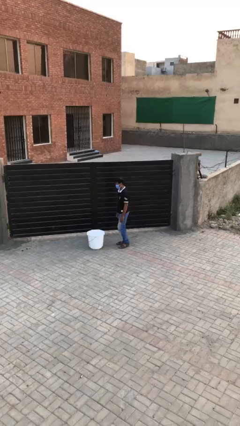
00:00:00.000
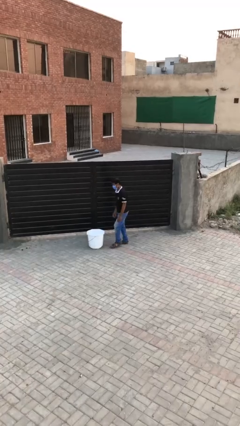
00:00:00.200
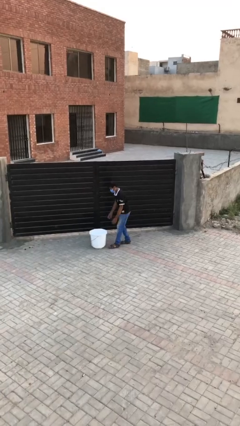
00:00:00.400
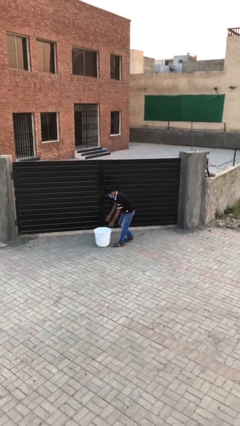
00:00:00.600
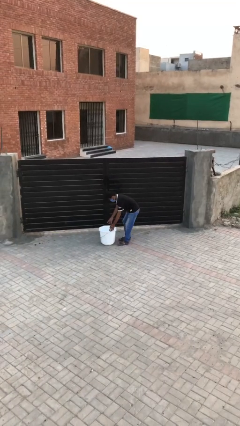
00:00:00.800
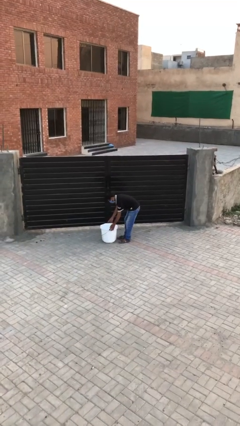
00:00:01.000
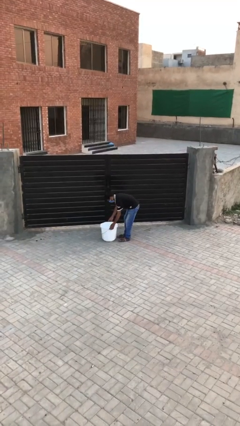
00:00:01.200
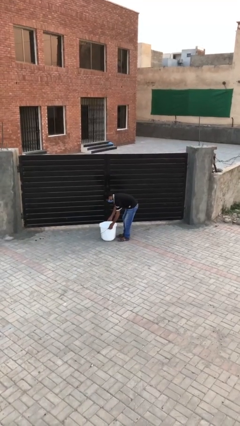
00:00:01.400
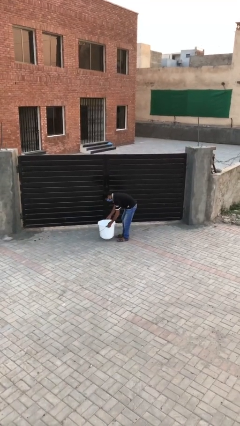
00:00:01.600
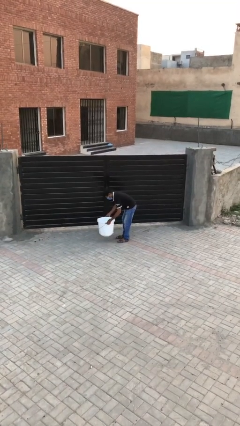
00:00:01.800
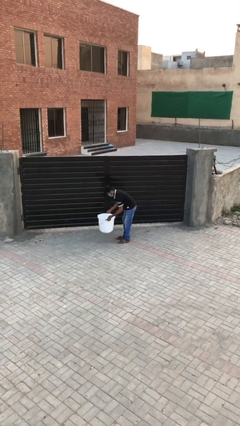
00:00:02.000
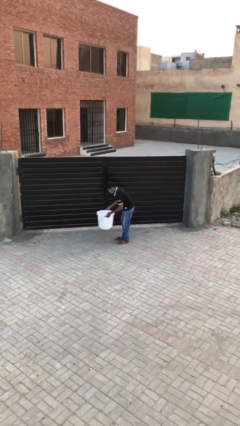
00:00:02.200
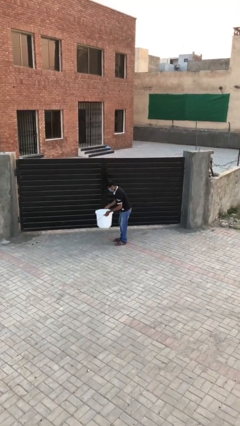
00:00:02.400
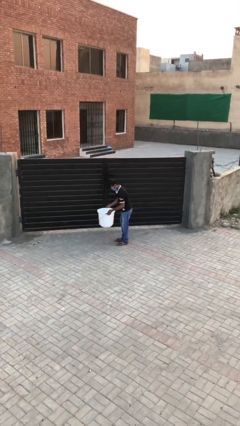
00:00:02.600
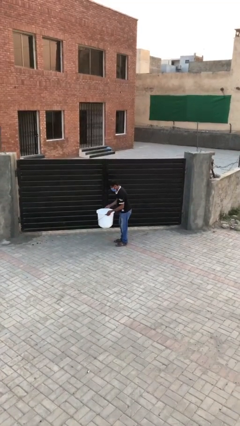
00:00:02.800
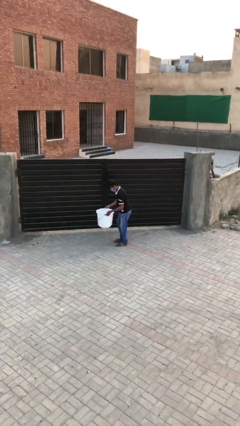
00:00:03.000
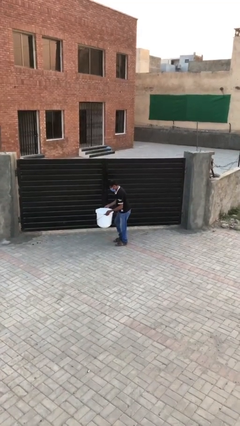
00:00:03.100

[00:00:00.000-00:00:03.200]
person picks up object from floor

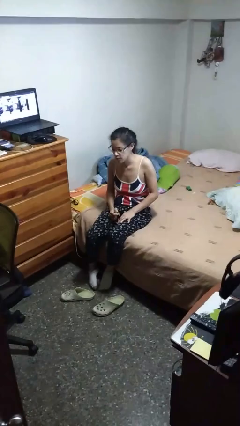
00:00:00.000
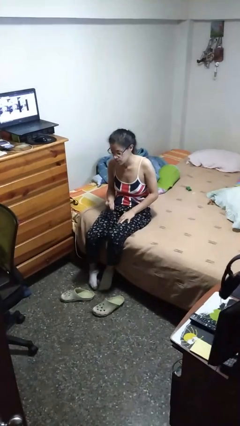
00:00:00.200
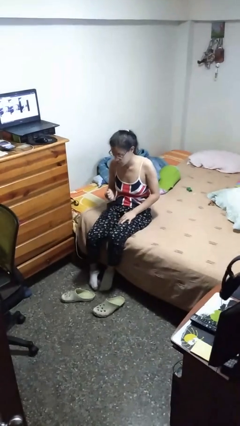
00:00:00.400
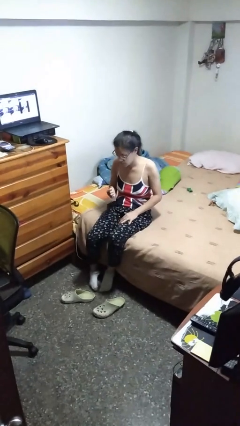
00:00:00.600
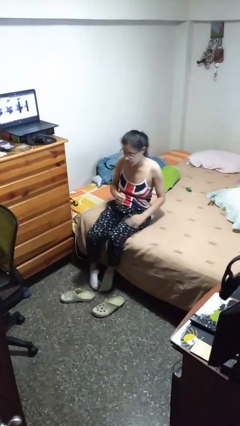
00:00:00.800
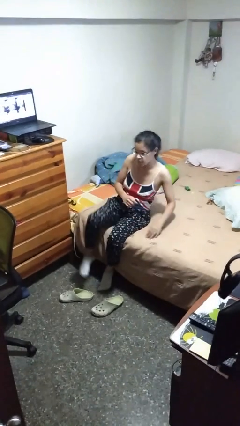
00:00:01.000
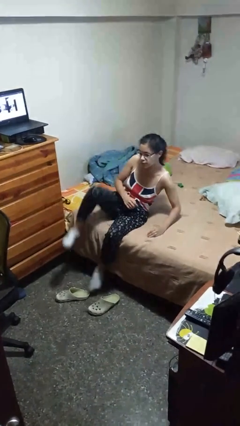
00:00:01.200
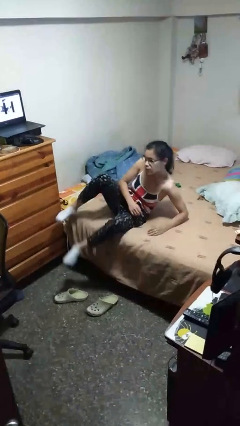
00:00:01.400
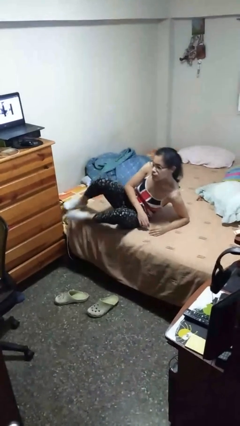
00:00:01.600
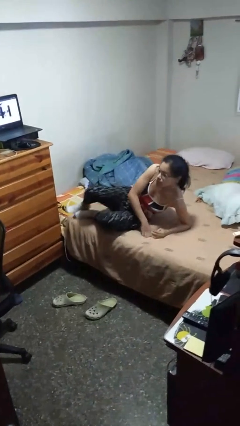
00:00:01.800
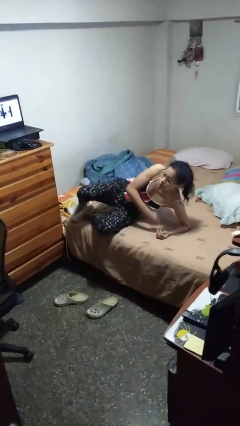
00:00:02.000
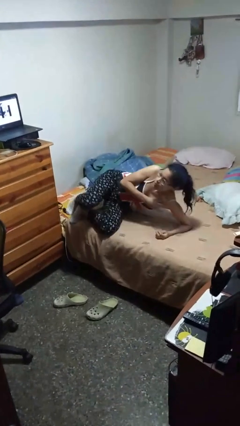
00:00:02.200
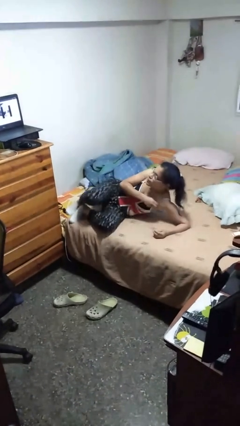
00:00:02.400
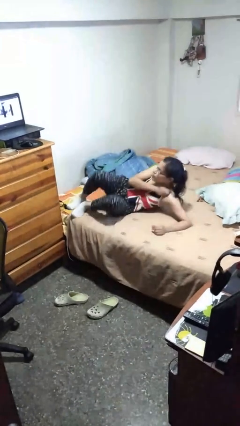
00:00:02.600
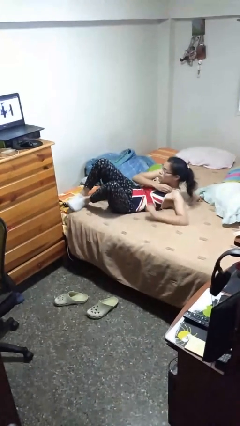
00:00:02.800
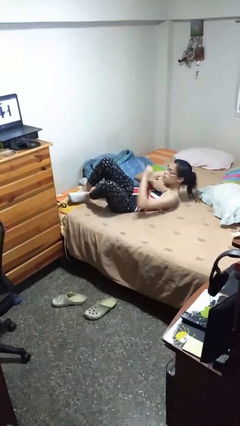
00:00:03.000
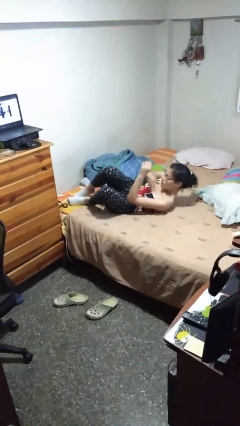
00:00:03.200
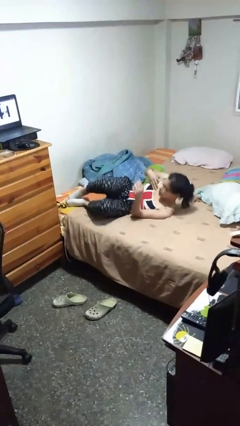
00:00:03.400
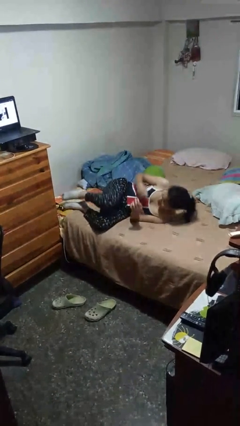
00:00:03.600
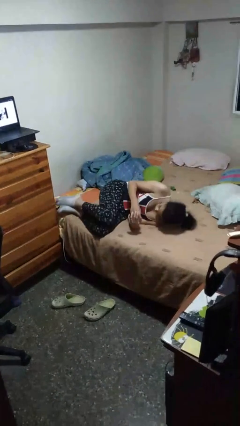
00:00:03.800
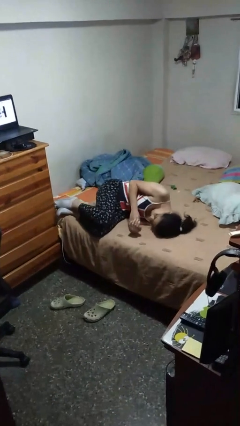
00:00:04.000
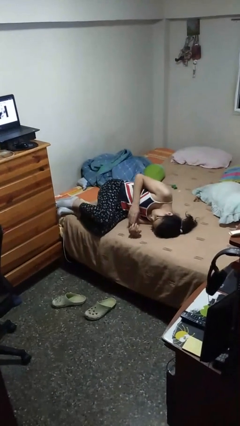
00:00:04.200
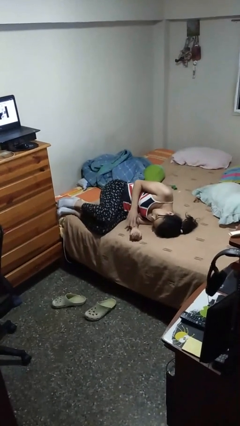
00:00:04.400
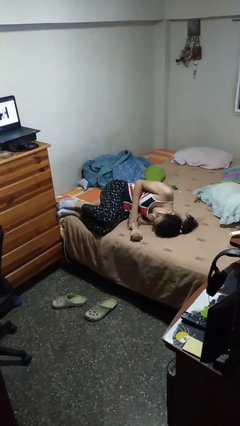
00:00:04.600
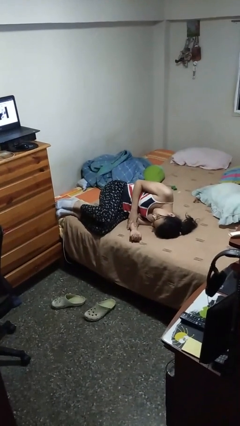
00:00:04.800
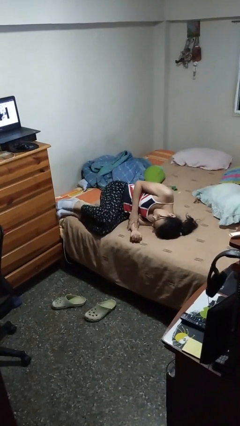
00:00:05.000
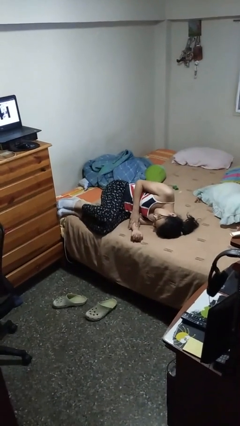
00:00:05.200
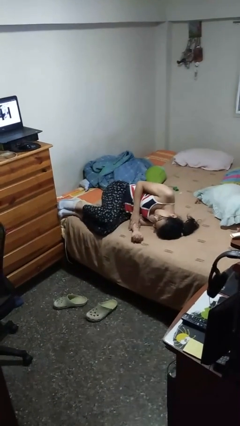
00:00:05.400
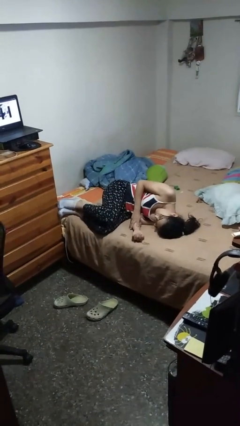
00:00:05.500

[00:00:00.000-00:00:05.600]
person lies down on bed

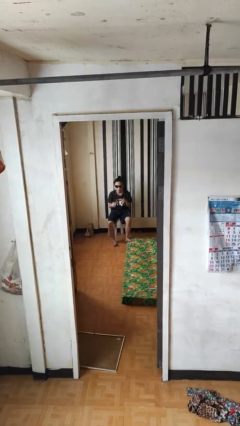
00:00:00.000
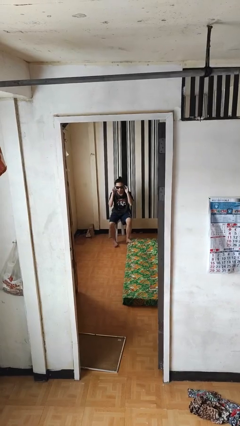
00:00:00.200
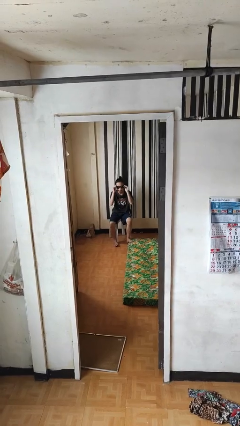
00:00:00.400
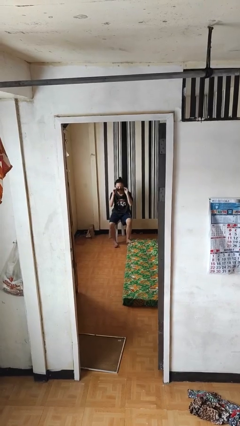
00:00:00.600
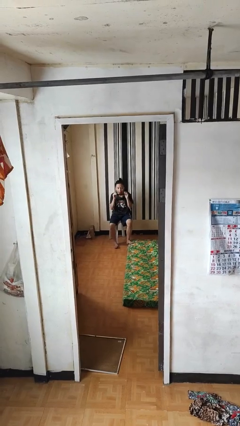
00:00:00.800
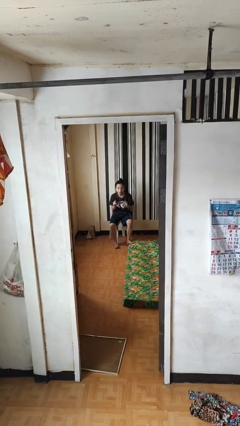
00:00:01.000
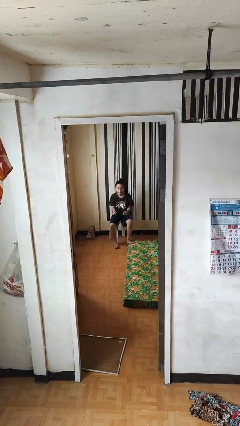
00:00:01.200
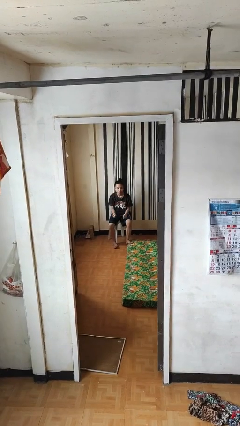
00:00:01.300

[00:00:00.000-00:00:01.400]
person takes off sunglasses

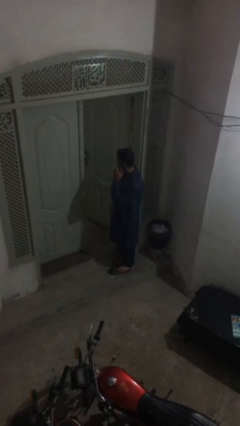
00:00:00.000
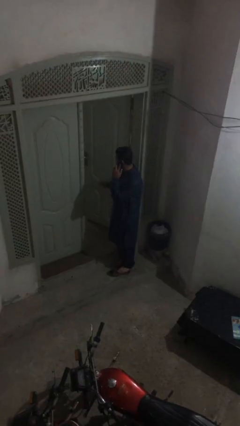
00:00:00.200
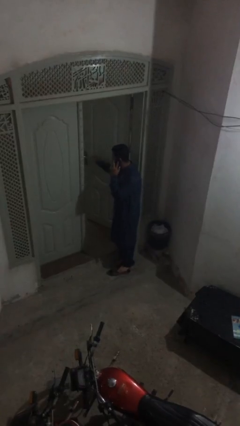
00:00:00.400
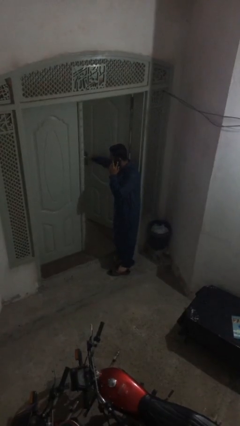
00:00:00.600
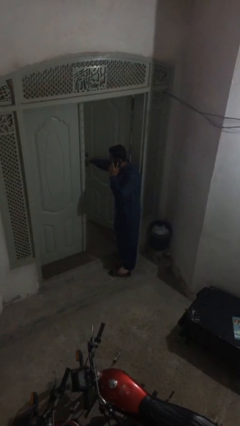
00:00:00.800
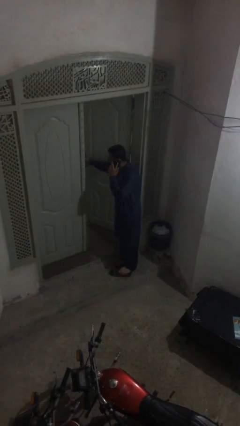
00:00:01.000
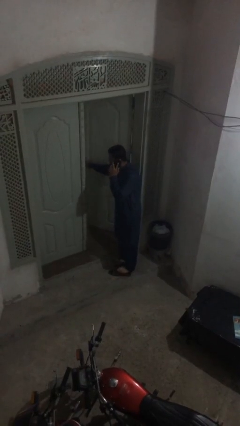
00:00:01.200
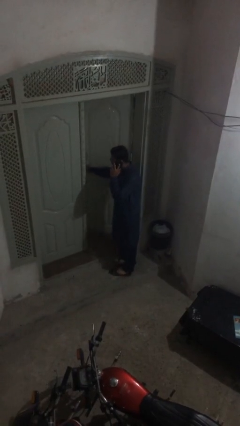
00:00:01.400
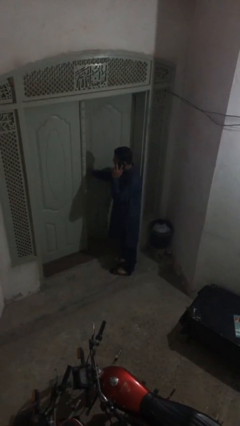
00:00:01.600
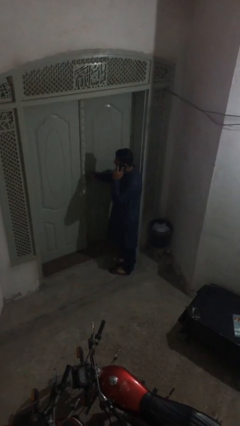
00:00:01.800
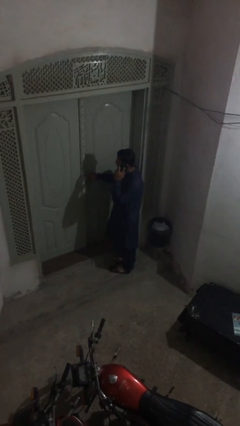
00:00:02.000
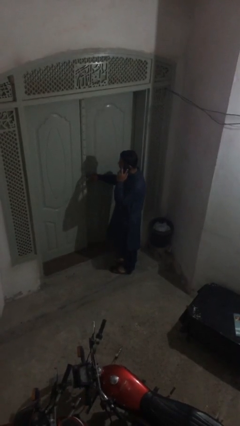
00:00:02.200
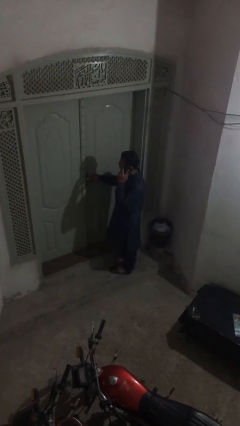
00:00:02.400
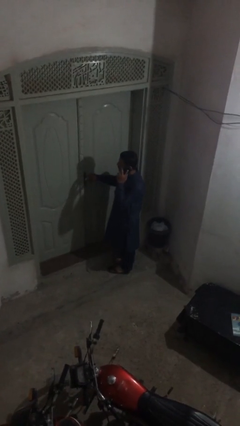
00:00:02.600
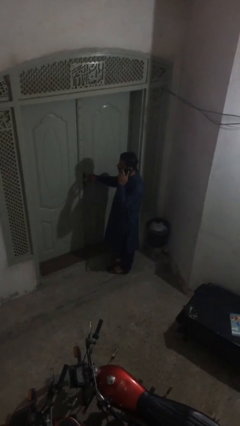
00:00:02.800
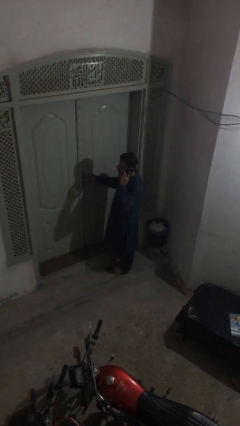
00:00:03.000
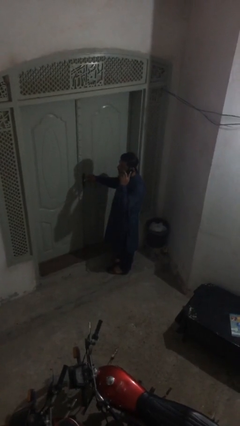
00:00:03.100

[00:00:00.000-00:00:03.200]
person closes facility door

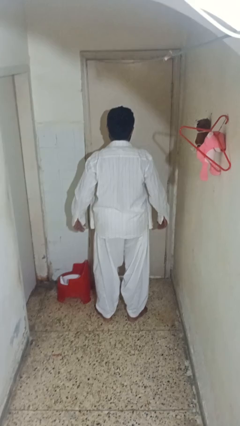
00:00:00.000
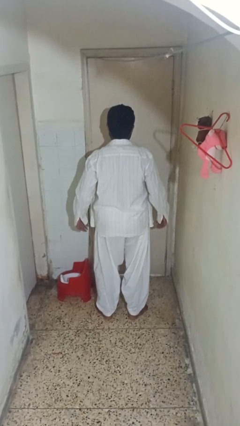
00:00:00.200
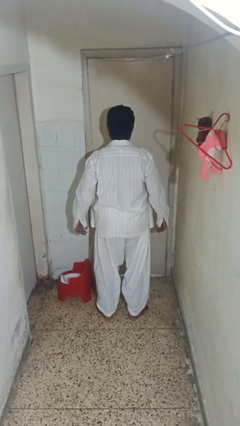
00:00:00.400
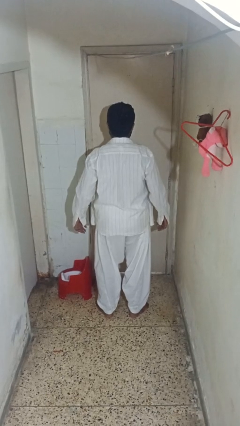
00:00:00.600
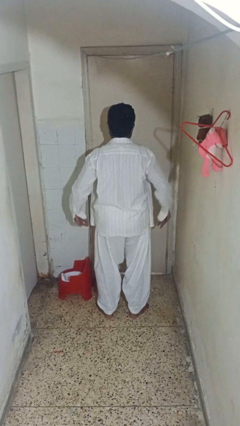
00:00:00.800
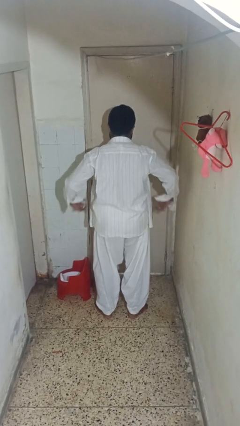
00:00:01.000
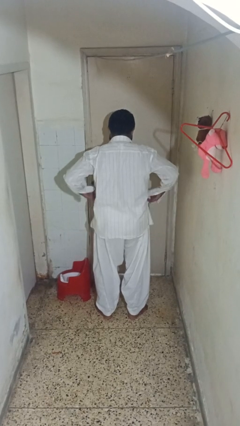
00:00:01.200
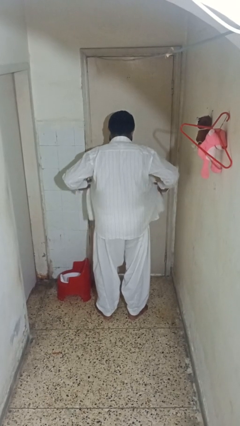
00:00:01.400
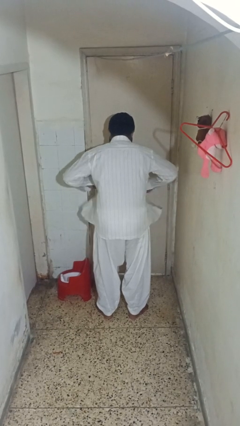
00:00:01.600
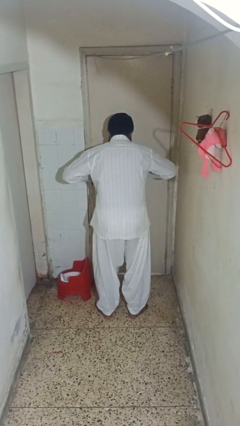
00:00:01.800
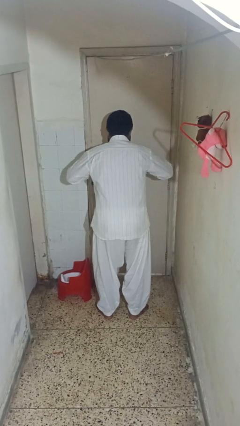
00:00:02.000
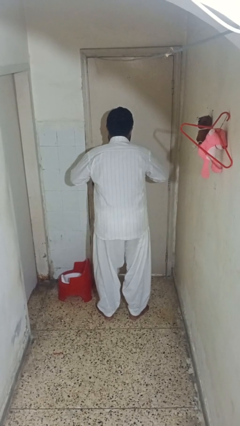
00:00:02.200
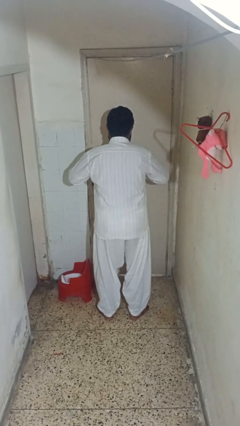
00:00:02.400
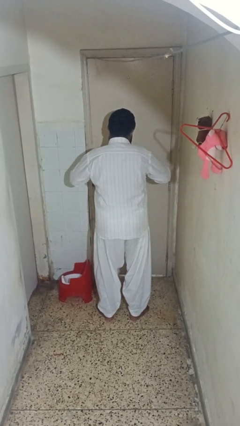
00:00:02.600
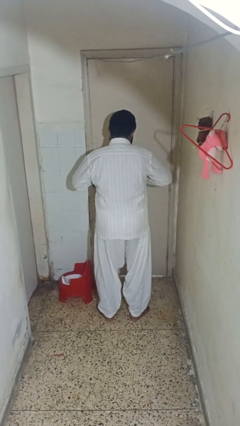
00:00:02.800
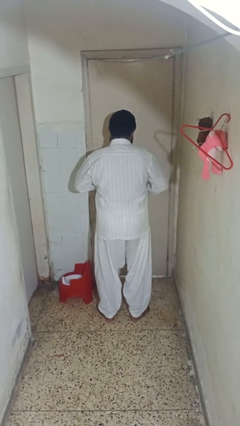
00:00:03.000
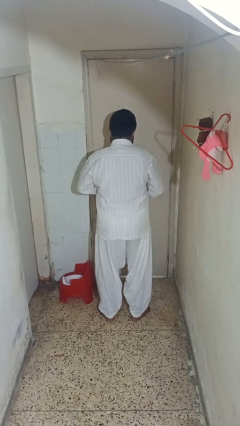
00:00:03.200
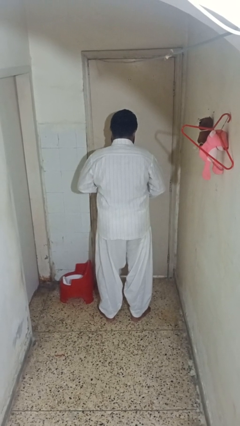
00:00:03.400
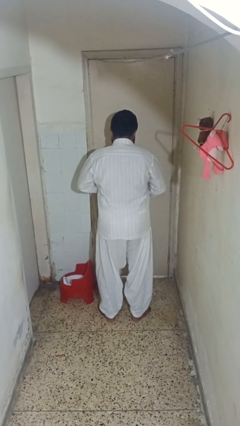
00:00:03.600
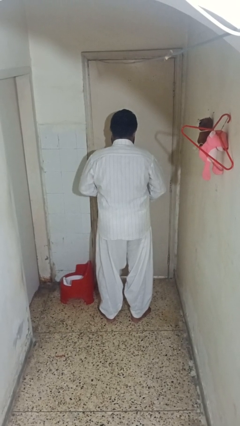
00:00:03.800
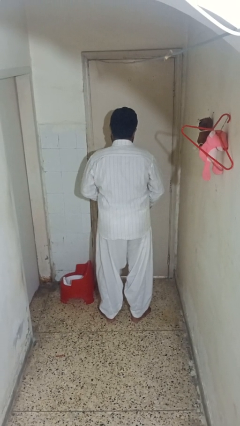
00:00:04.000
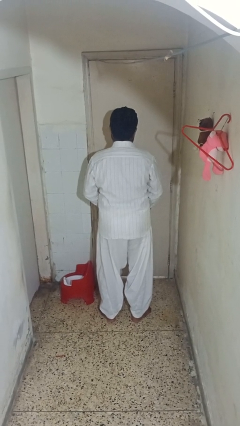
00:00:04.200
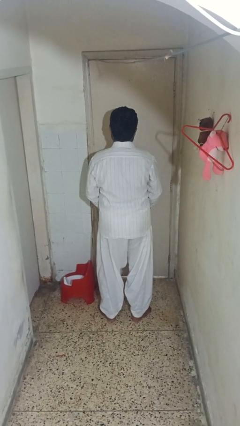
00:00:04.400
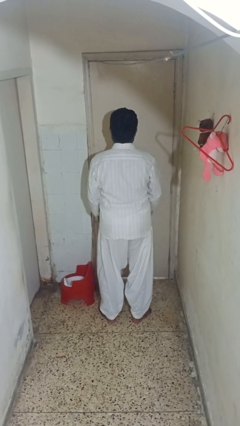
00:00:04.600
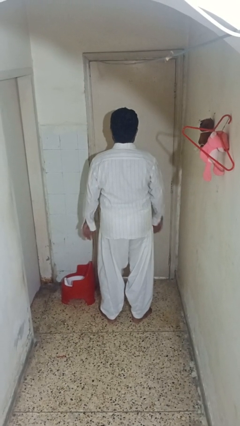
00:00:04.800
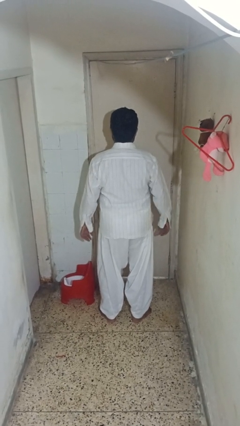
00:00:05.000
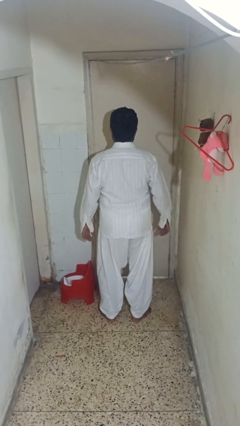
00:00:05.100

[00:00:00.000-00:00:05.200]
person buttons shirt
